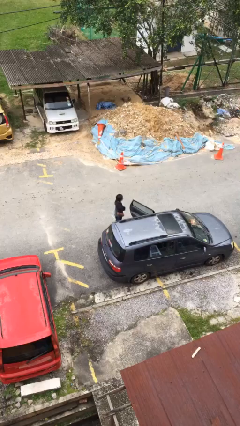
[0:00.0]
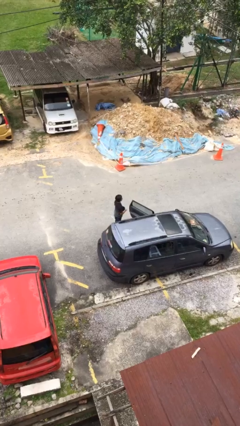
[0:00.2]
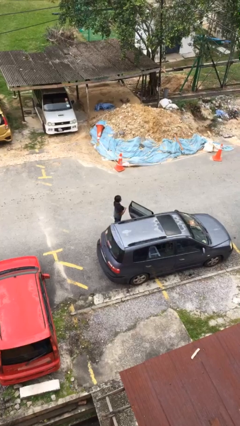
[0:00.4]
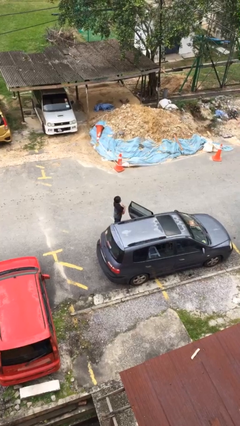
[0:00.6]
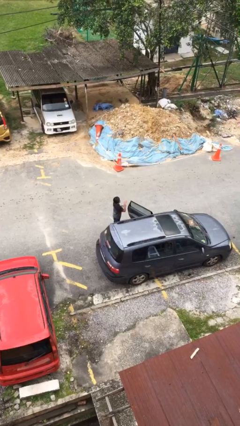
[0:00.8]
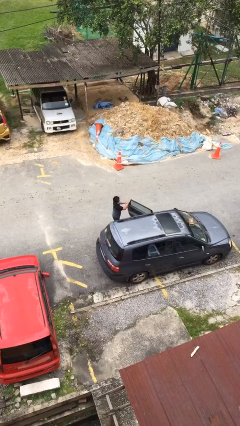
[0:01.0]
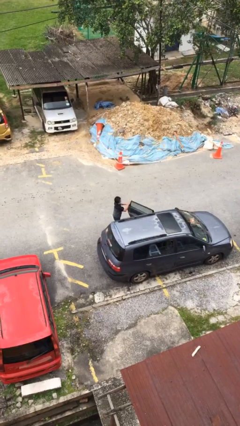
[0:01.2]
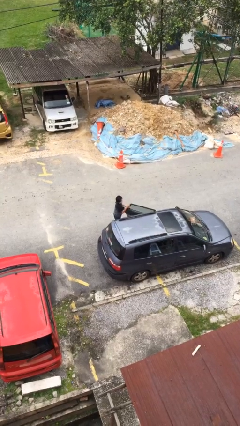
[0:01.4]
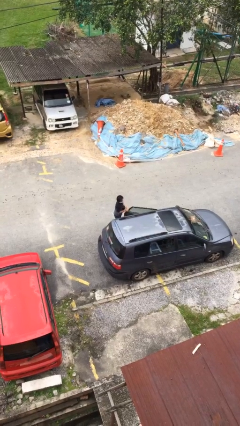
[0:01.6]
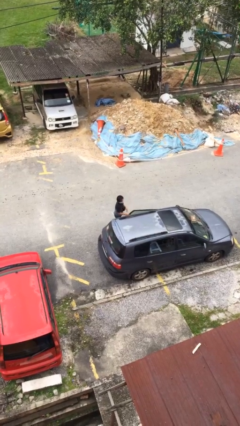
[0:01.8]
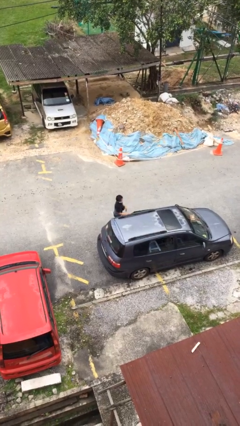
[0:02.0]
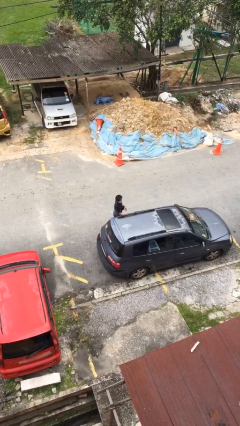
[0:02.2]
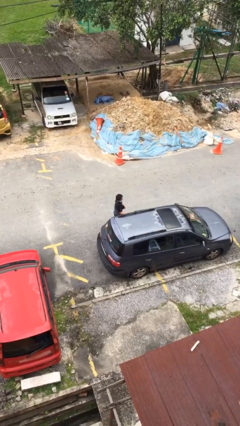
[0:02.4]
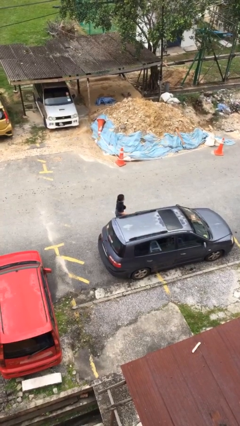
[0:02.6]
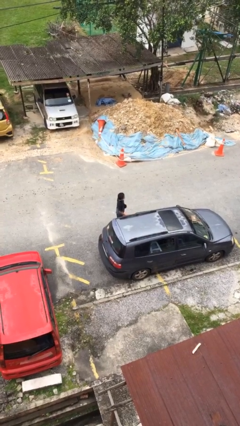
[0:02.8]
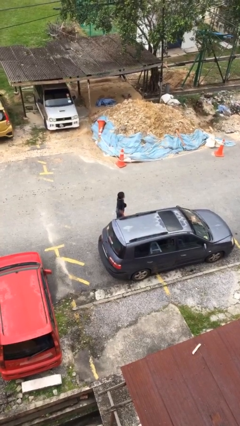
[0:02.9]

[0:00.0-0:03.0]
person closes car door

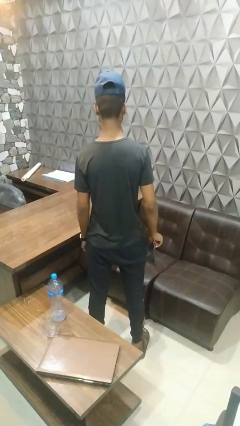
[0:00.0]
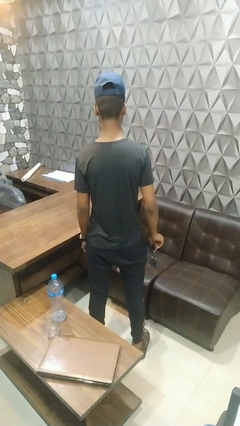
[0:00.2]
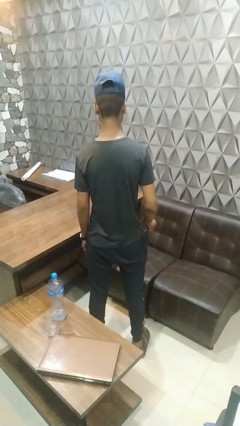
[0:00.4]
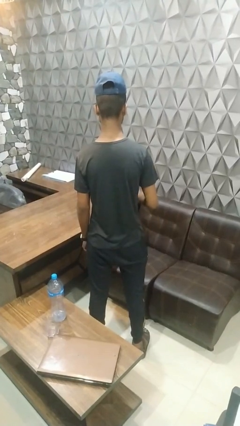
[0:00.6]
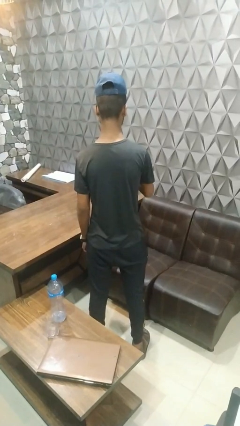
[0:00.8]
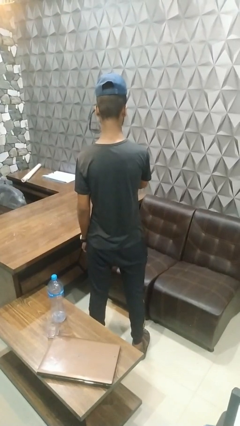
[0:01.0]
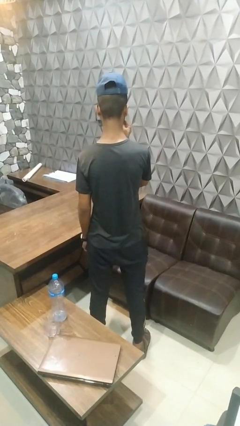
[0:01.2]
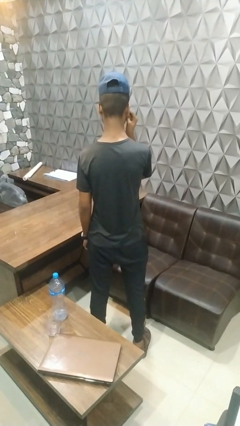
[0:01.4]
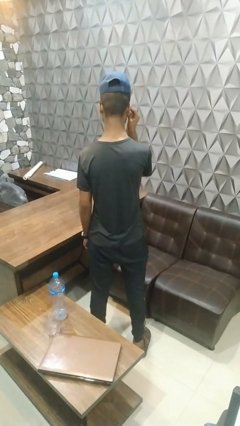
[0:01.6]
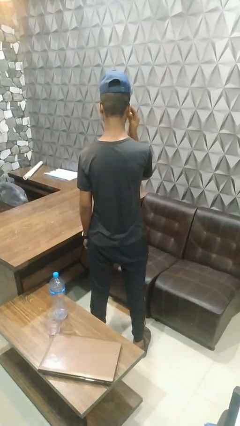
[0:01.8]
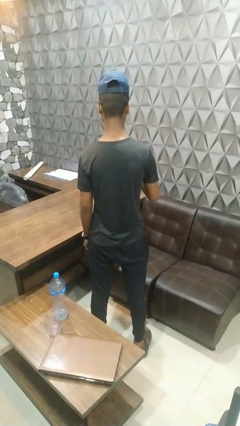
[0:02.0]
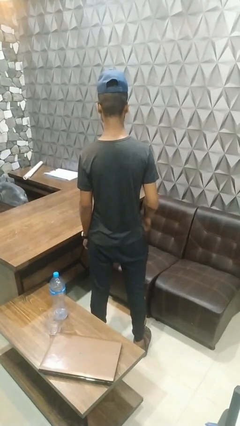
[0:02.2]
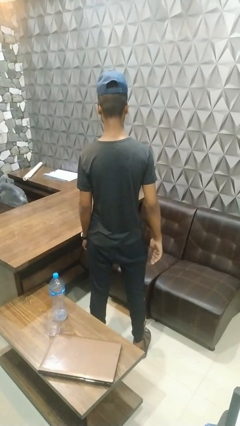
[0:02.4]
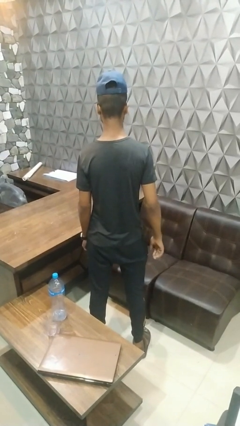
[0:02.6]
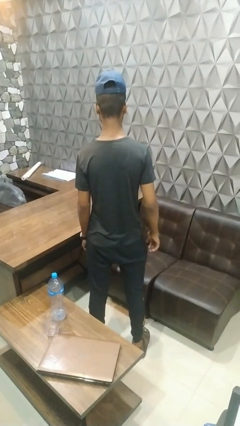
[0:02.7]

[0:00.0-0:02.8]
person puts on sunglasses

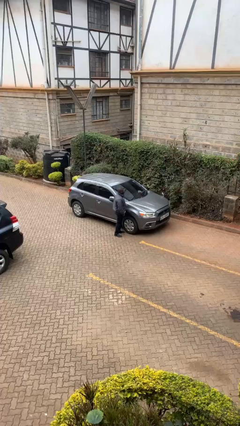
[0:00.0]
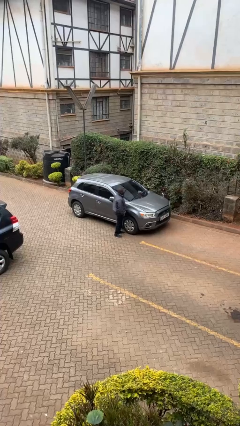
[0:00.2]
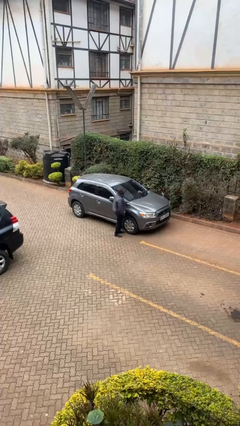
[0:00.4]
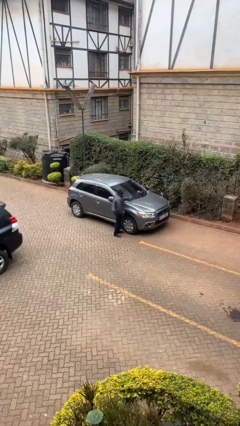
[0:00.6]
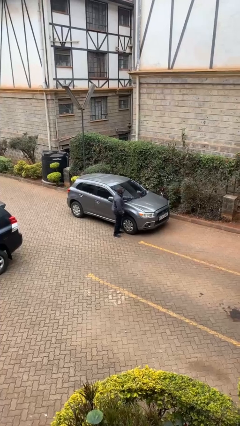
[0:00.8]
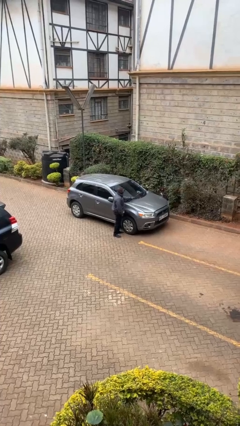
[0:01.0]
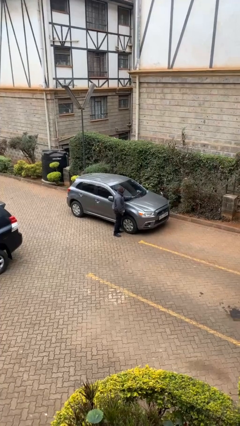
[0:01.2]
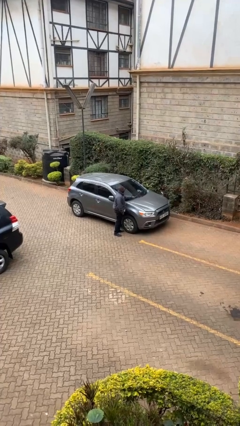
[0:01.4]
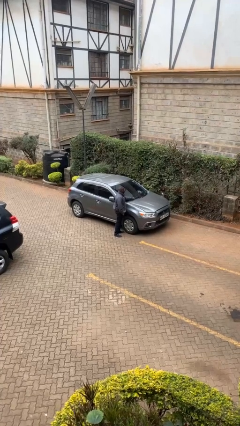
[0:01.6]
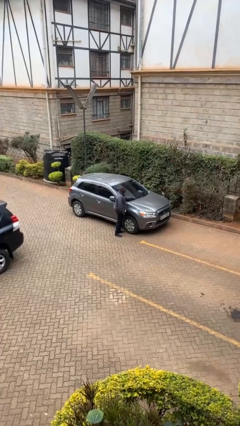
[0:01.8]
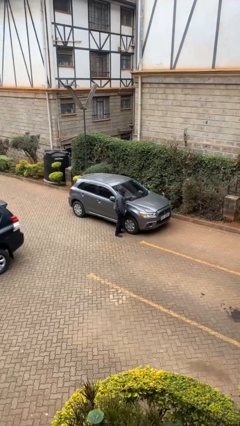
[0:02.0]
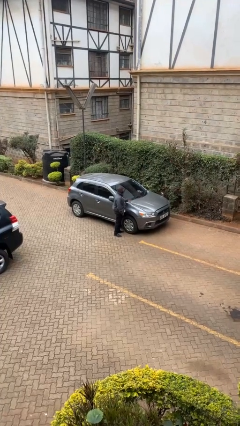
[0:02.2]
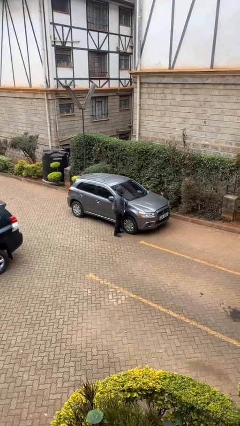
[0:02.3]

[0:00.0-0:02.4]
person flips down car wipers

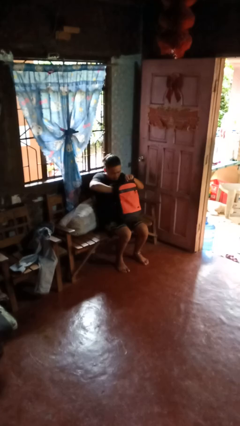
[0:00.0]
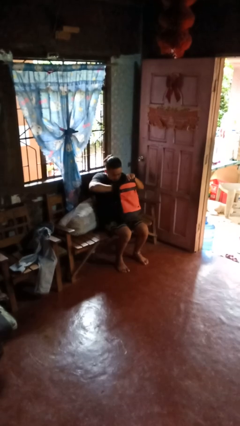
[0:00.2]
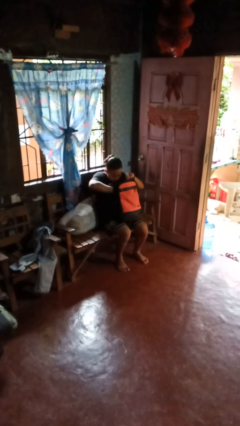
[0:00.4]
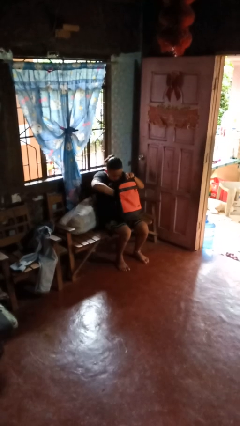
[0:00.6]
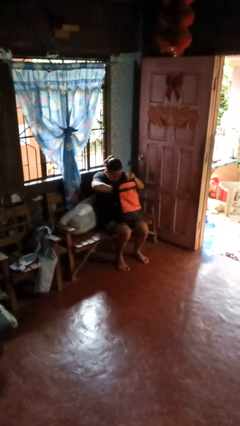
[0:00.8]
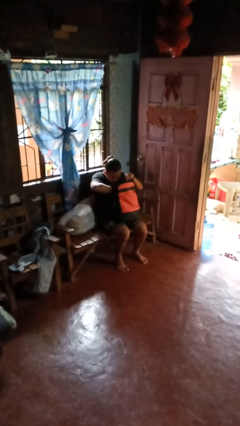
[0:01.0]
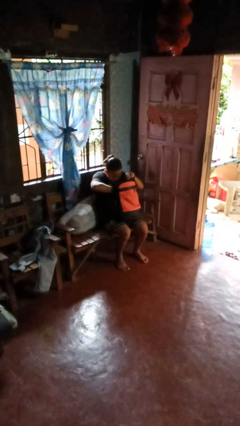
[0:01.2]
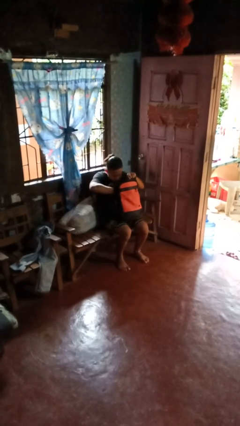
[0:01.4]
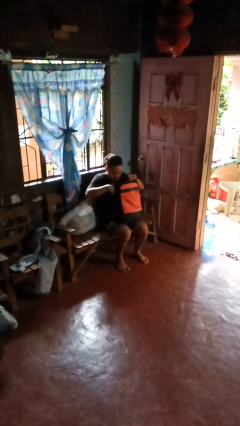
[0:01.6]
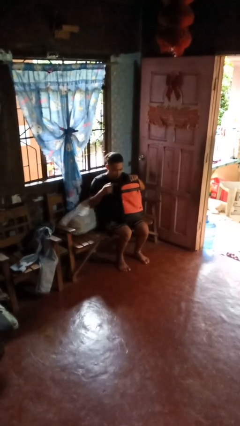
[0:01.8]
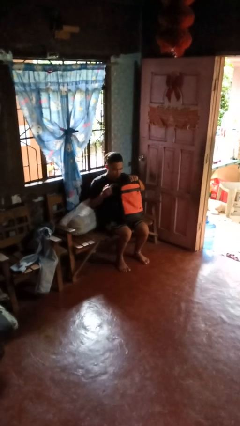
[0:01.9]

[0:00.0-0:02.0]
person searches in bag

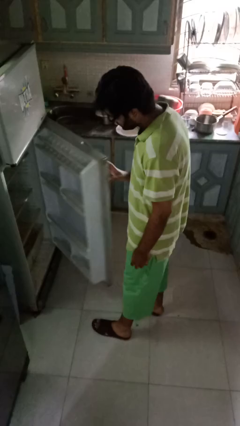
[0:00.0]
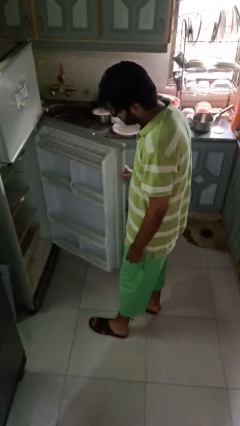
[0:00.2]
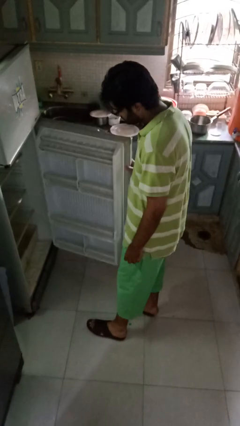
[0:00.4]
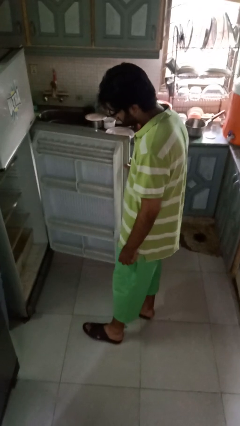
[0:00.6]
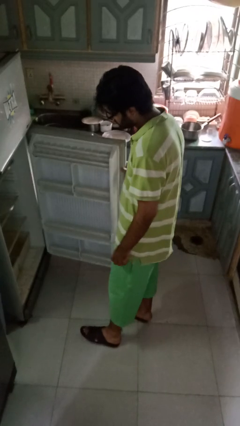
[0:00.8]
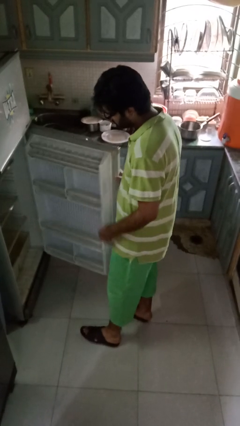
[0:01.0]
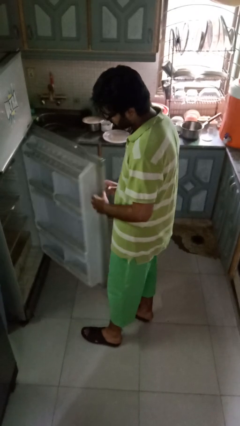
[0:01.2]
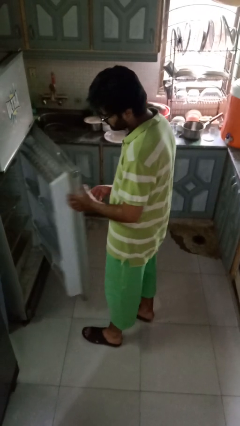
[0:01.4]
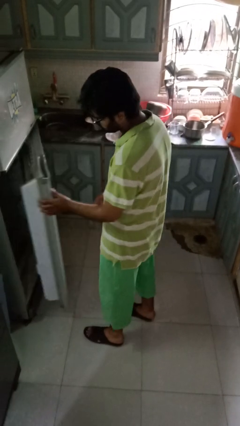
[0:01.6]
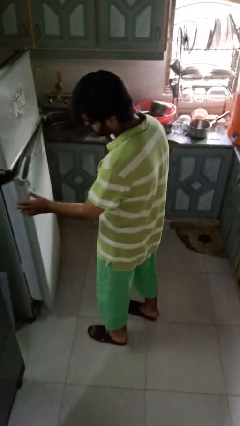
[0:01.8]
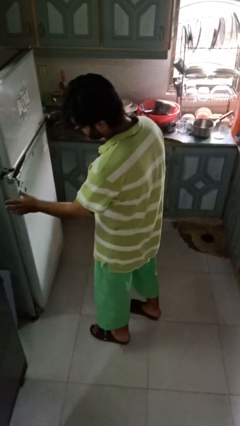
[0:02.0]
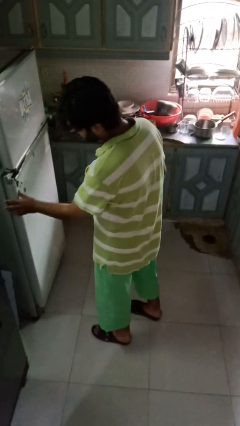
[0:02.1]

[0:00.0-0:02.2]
person closes refrigerator

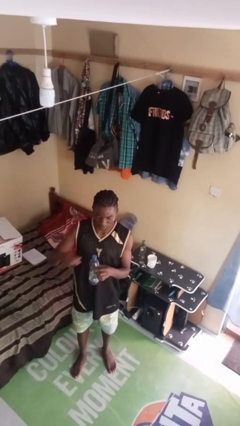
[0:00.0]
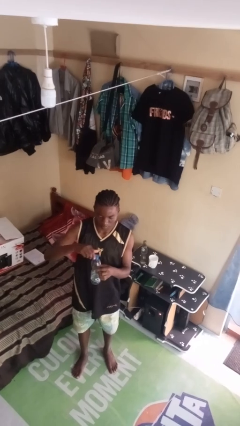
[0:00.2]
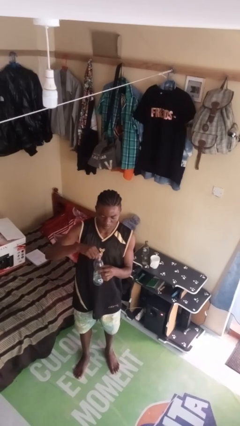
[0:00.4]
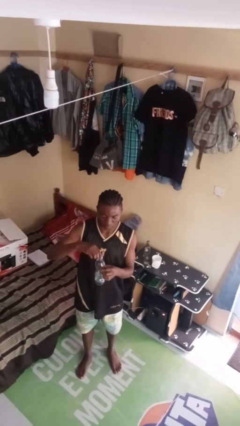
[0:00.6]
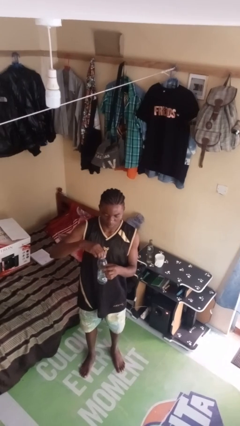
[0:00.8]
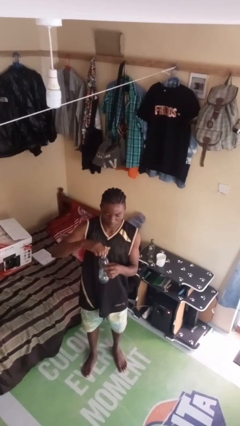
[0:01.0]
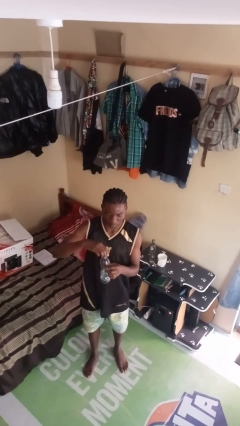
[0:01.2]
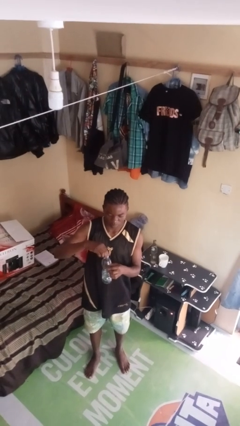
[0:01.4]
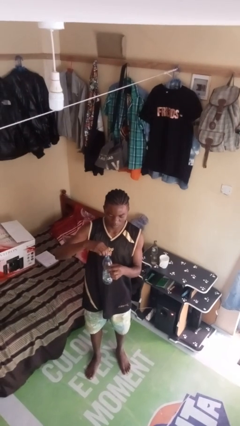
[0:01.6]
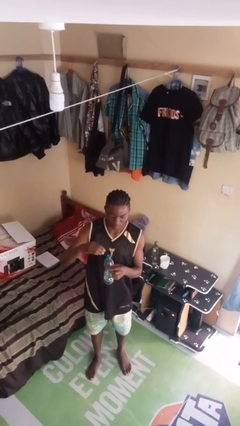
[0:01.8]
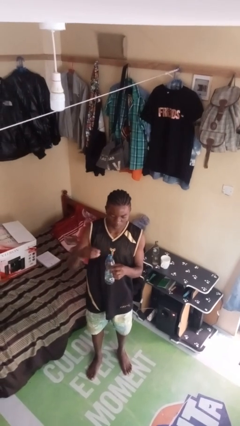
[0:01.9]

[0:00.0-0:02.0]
person unscrews lid from bottle

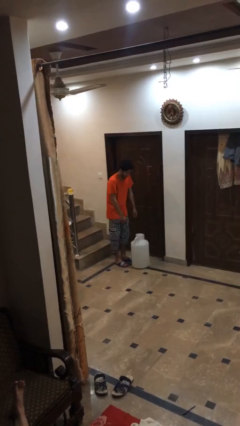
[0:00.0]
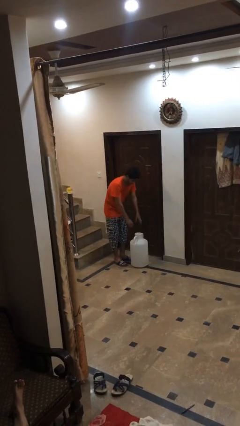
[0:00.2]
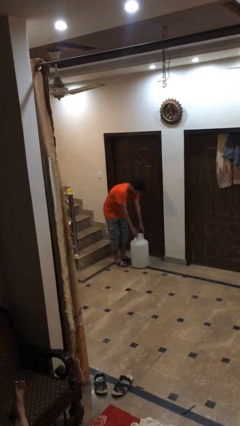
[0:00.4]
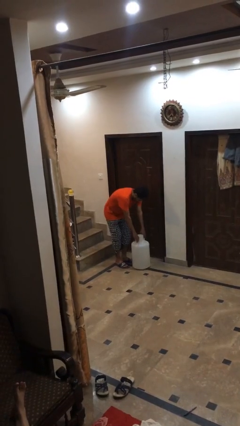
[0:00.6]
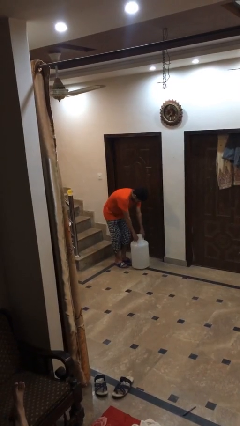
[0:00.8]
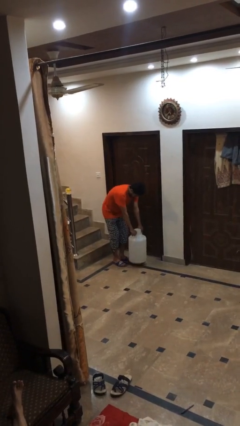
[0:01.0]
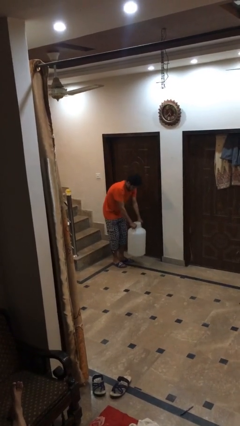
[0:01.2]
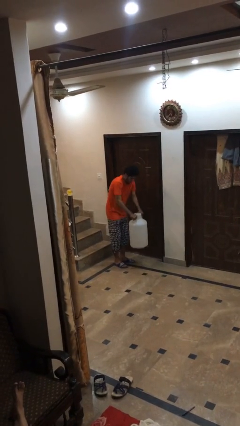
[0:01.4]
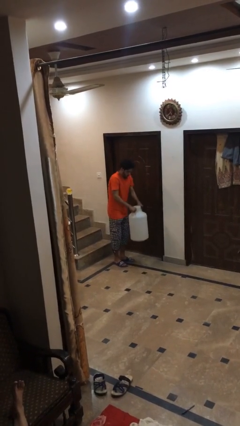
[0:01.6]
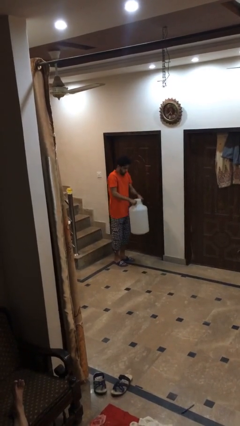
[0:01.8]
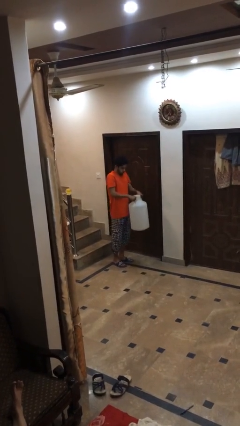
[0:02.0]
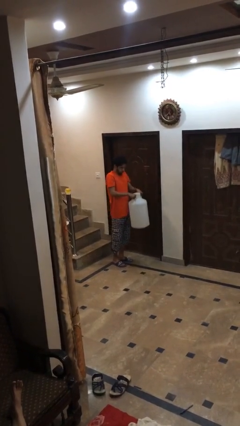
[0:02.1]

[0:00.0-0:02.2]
person picks up object from floor
